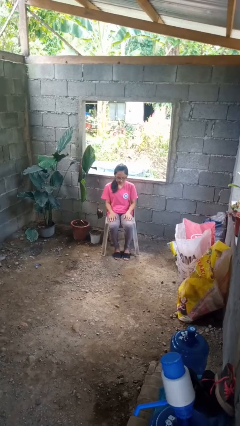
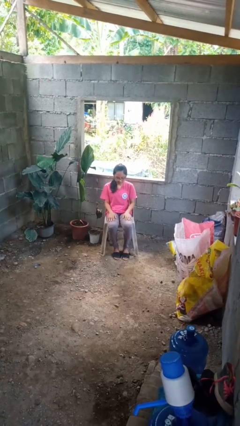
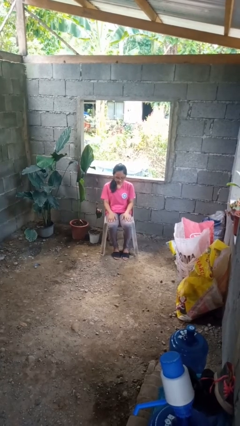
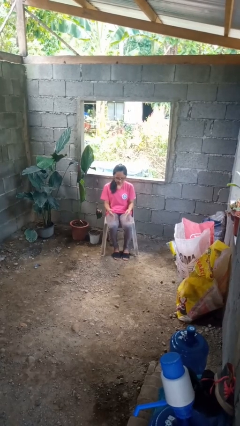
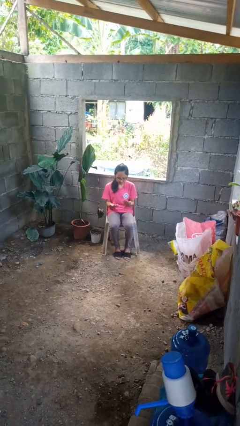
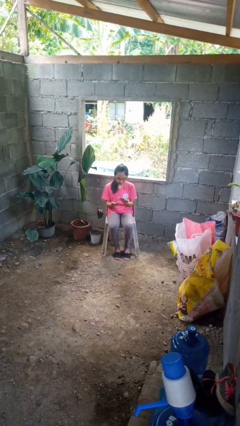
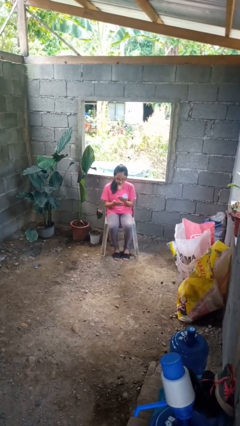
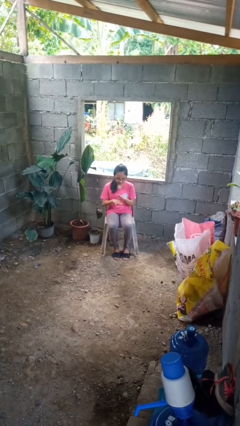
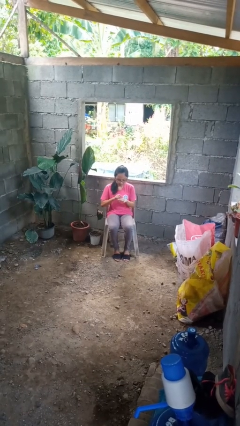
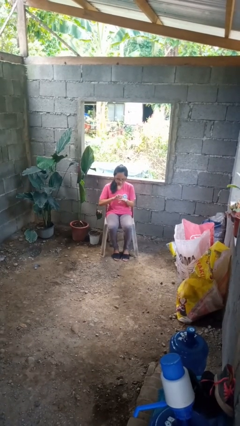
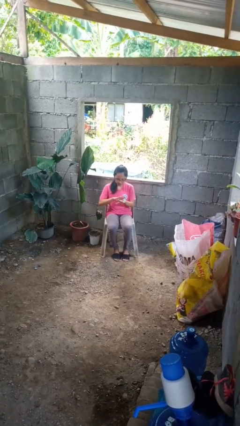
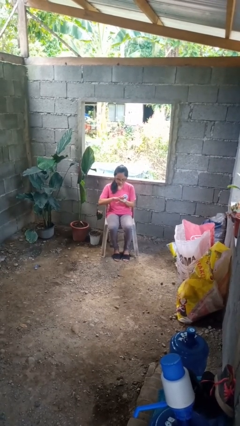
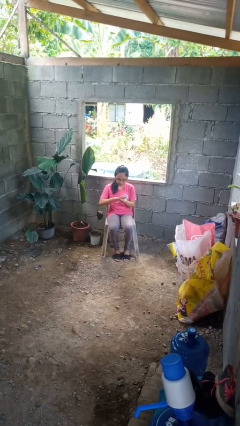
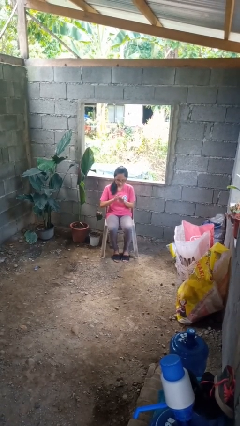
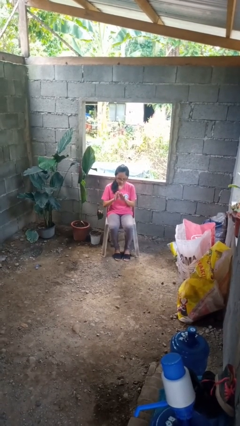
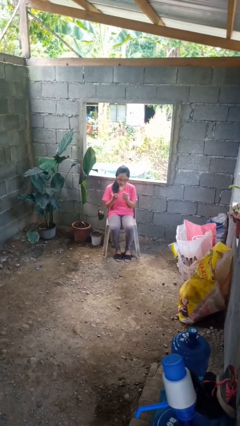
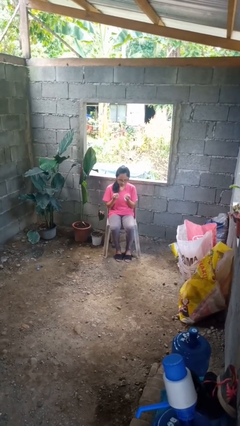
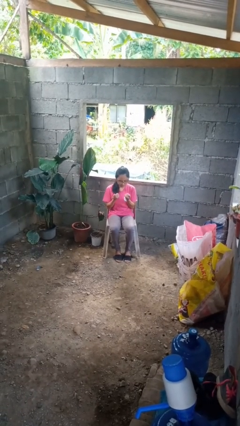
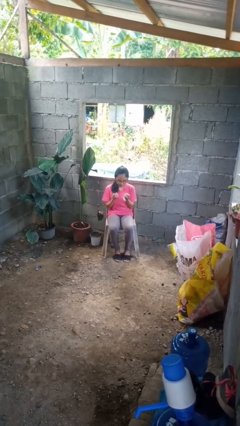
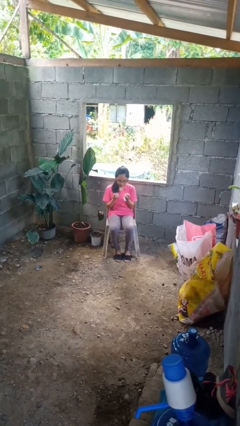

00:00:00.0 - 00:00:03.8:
person looks at hands in lap

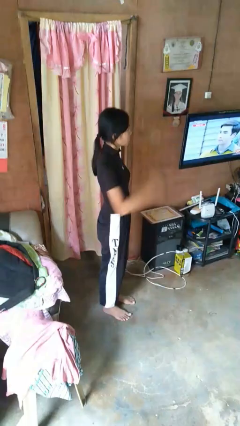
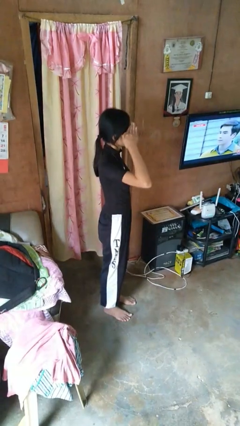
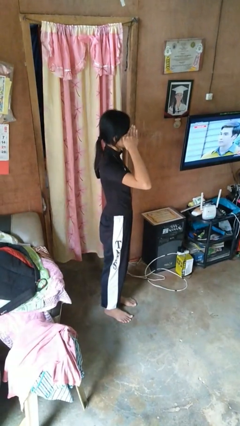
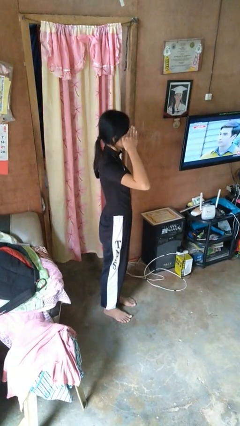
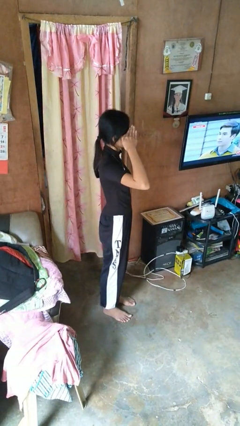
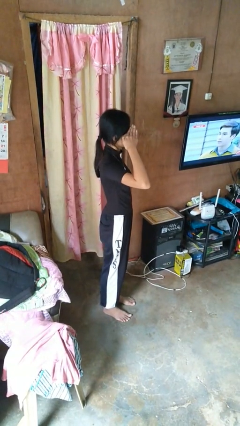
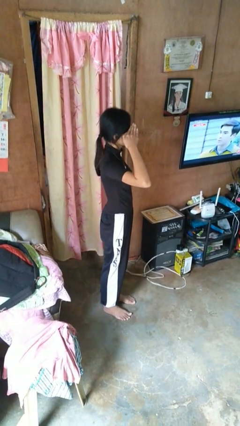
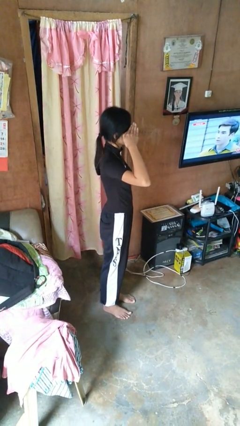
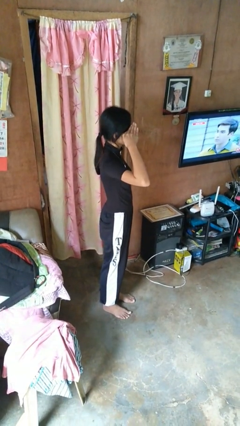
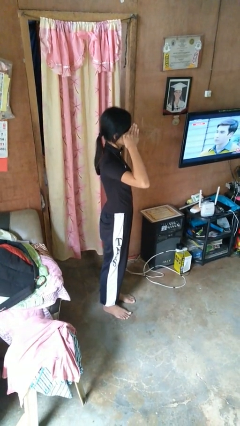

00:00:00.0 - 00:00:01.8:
person salutes

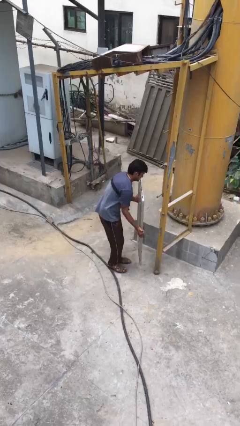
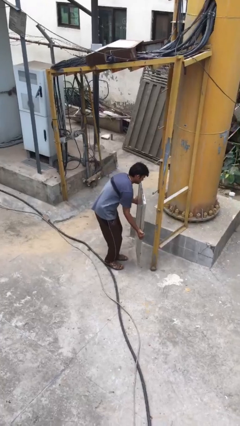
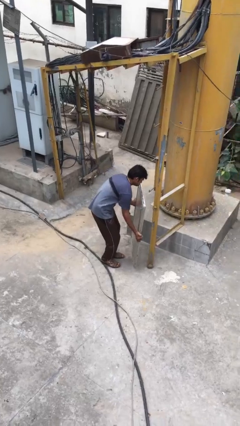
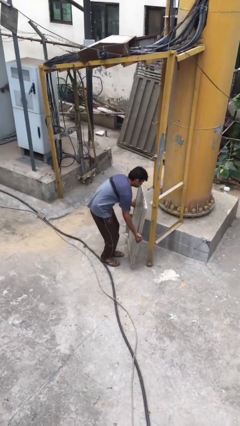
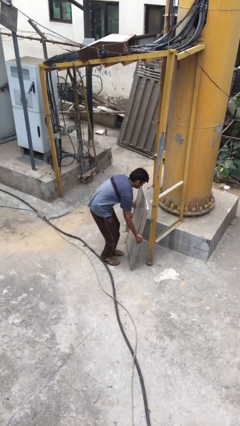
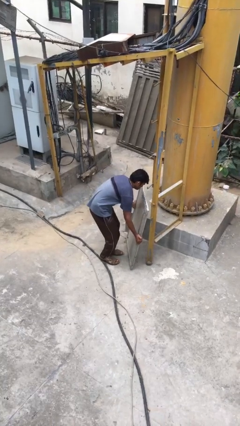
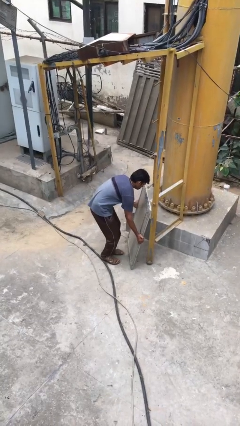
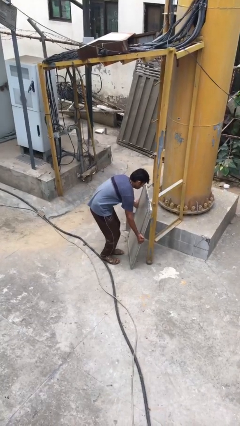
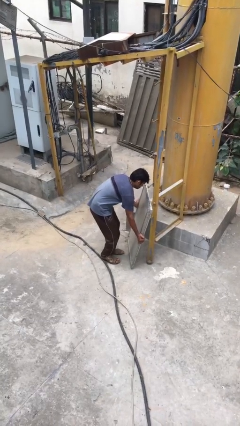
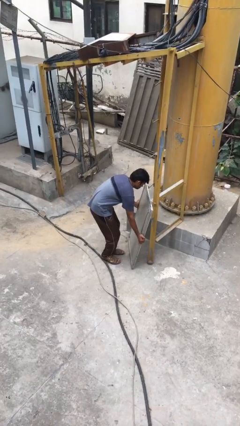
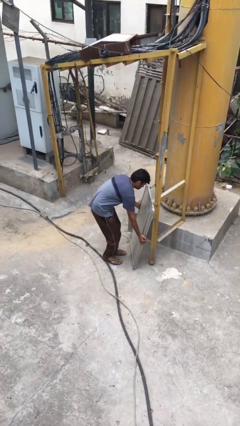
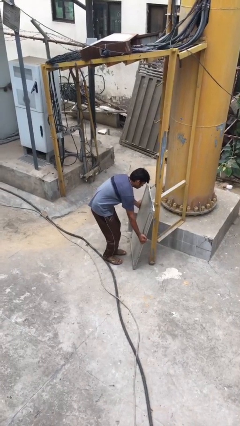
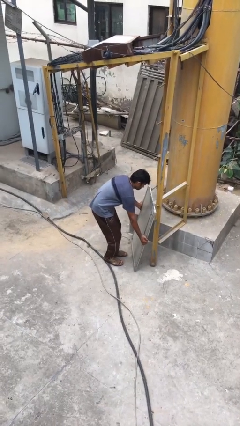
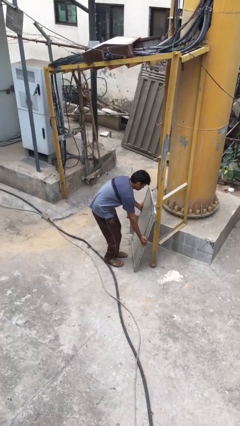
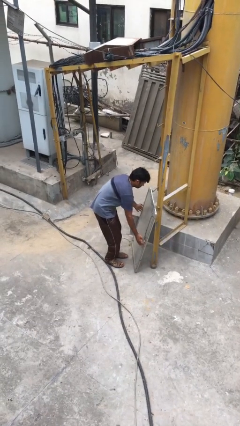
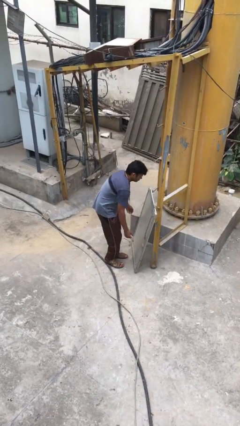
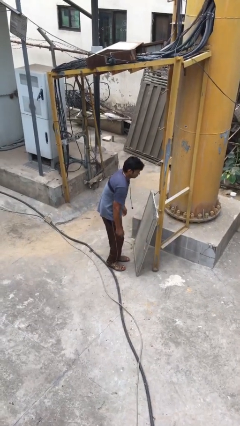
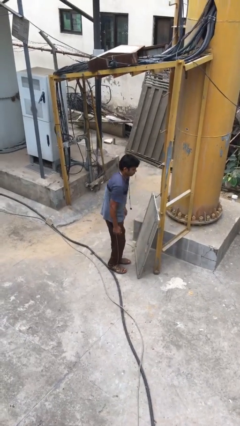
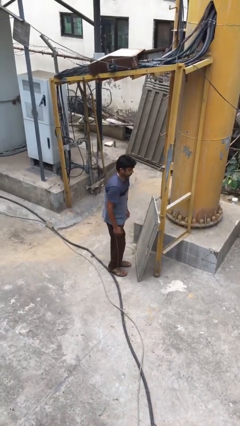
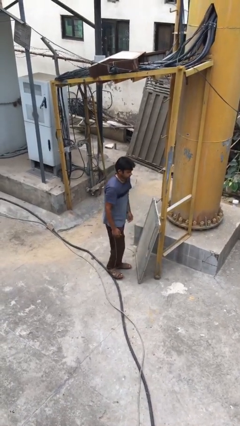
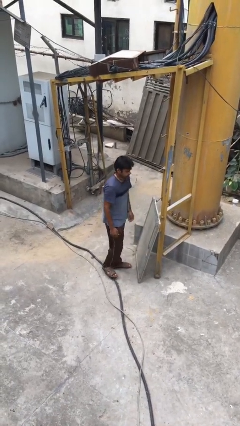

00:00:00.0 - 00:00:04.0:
person puts down object on floor

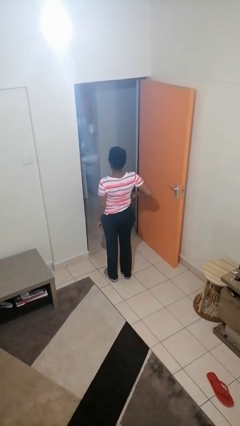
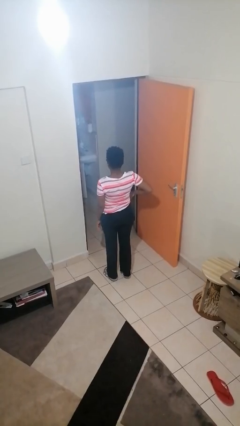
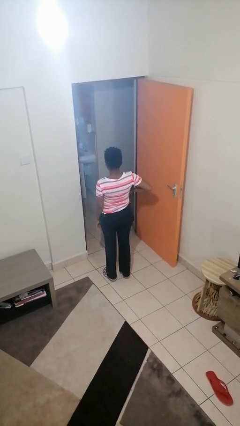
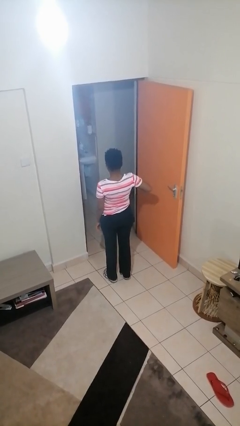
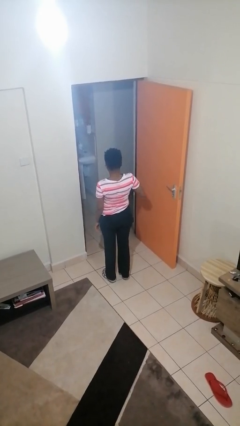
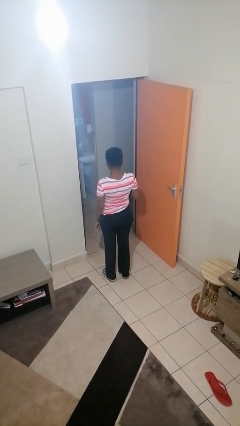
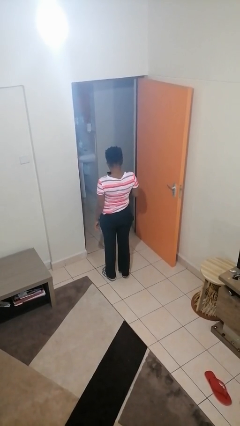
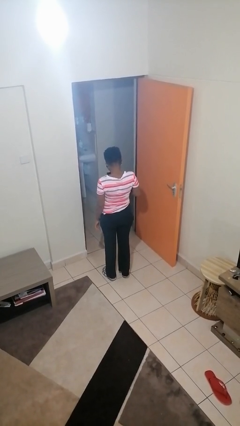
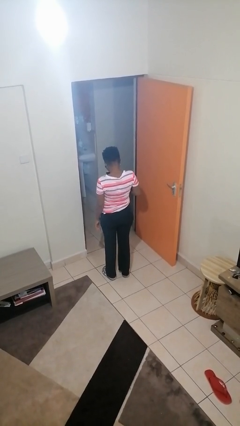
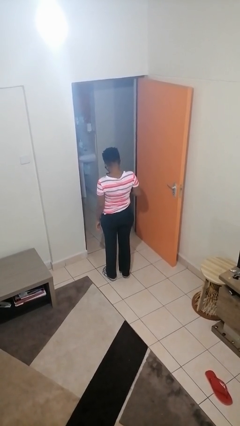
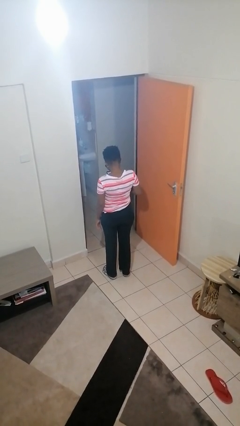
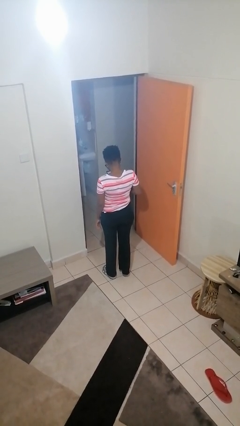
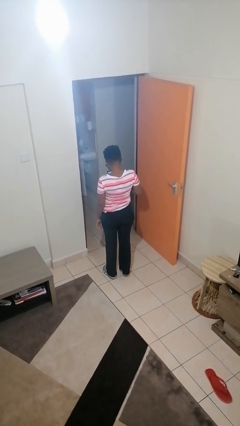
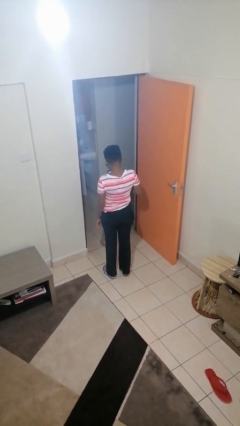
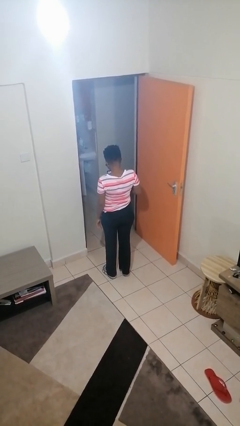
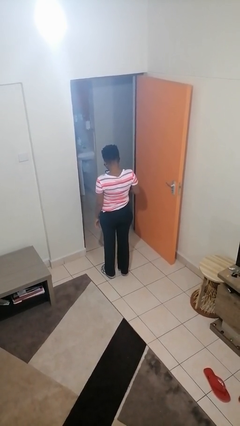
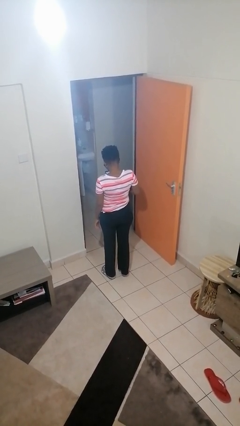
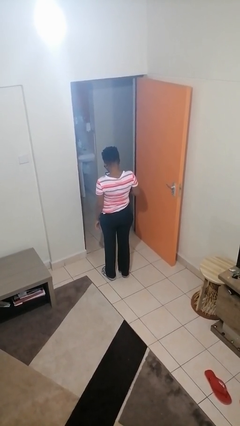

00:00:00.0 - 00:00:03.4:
person takes phone from pocket

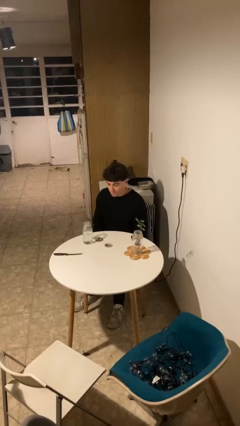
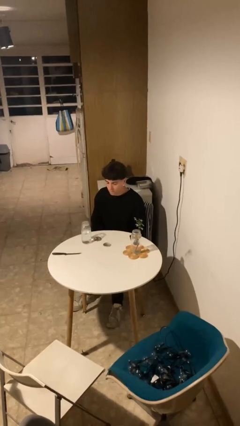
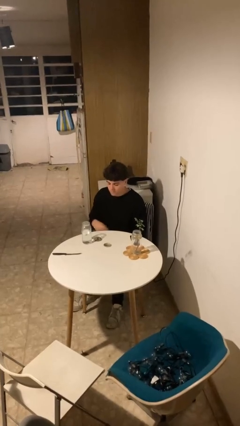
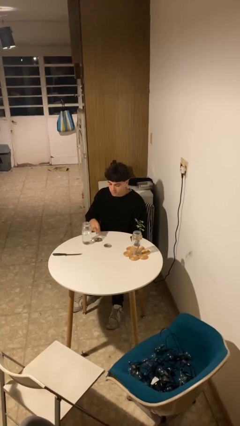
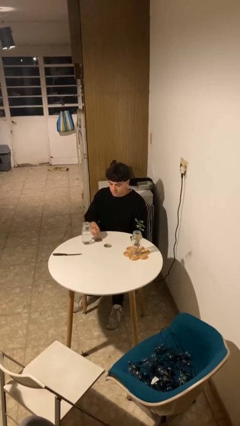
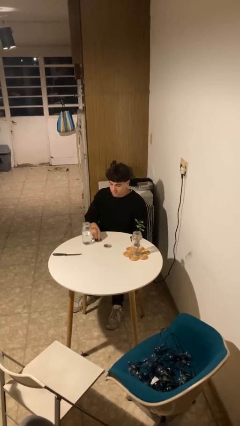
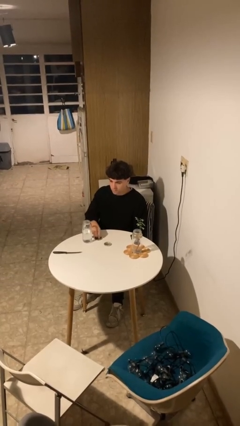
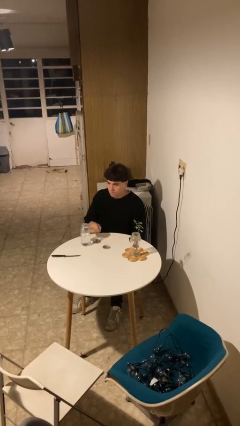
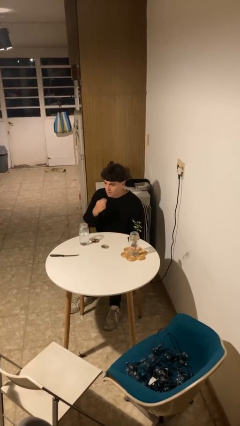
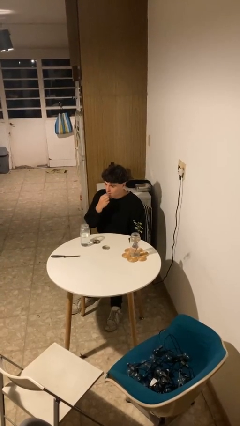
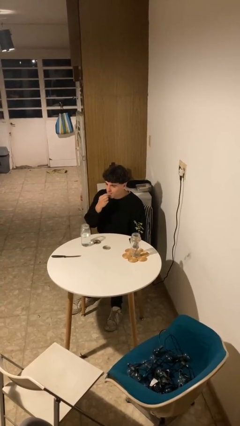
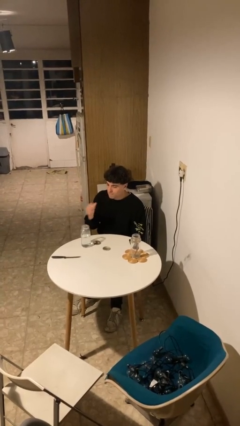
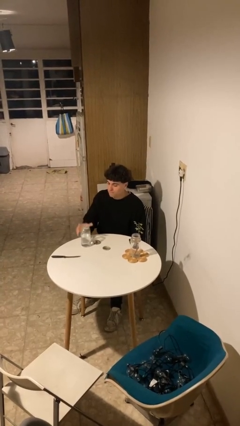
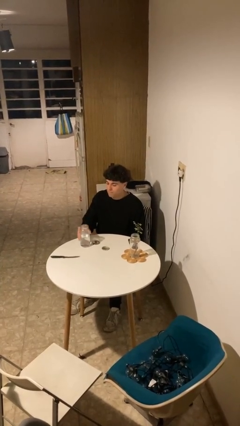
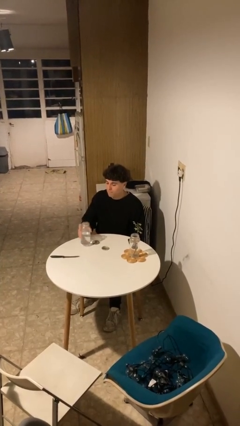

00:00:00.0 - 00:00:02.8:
person takes medicine pills

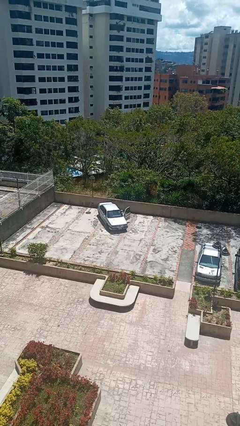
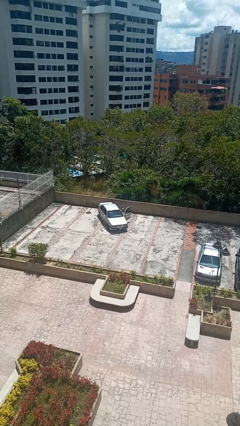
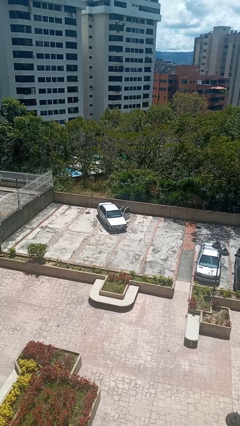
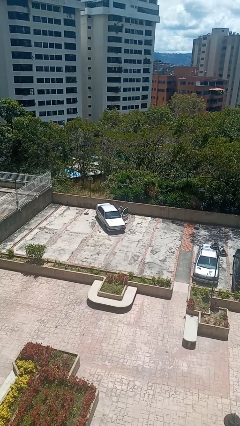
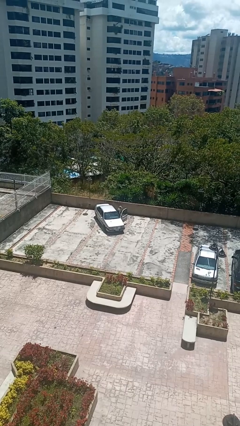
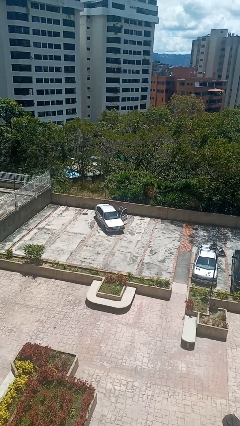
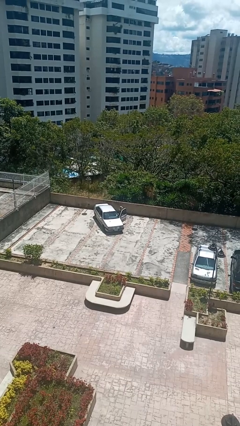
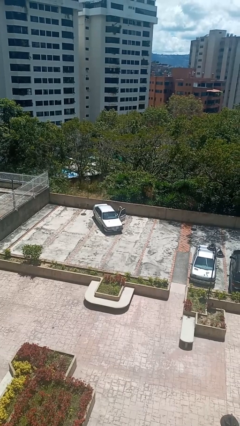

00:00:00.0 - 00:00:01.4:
person exits car
